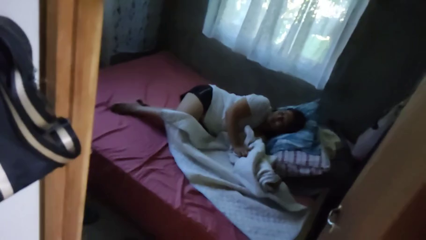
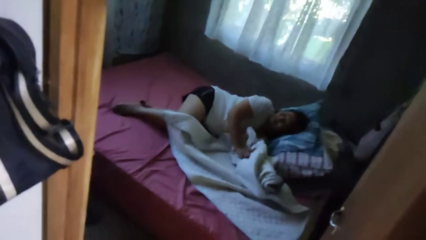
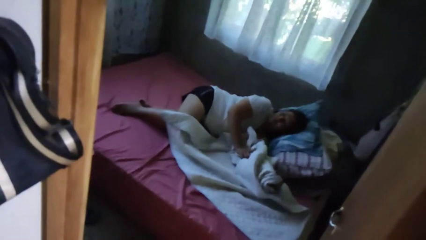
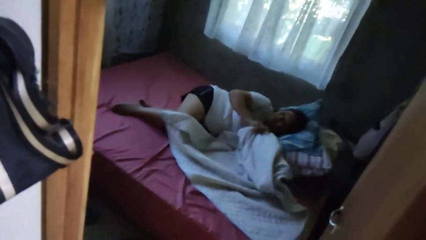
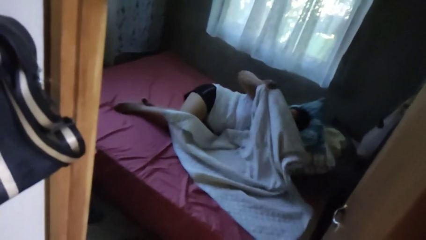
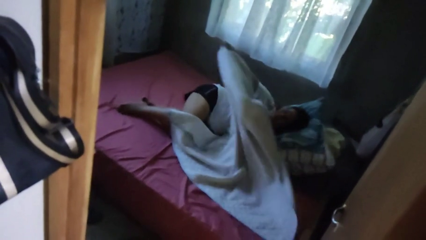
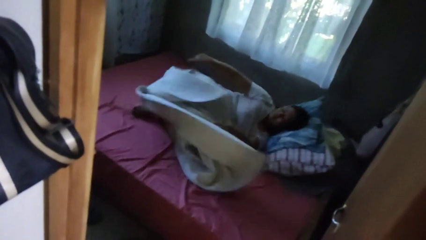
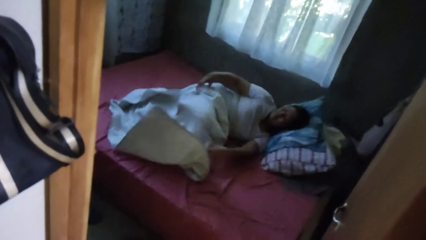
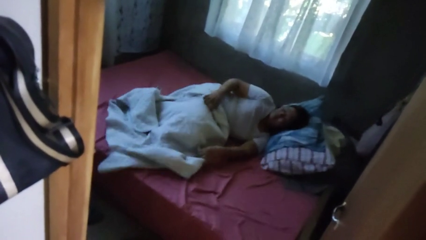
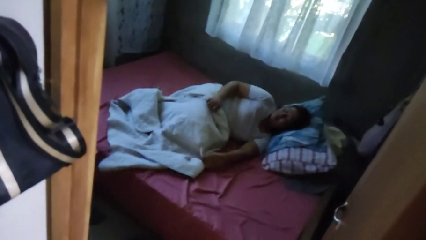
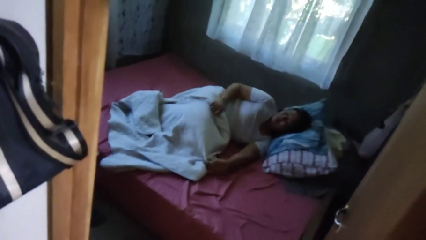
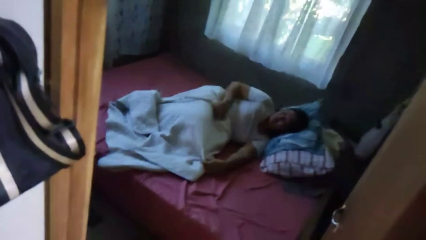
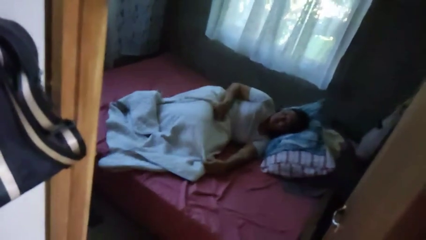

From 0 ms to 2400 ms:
person covers with bedsheets

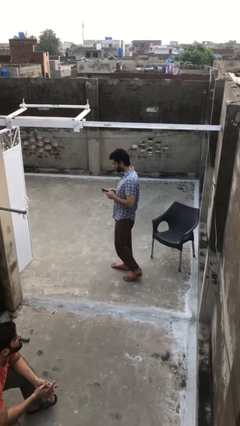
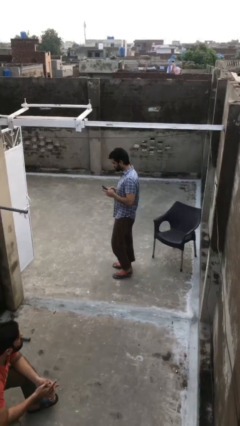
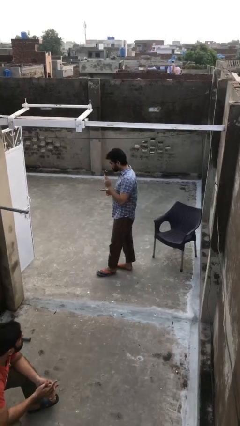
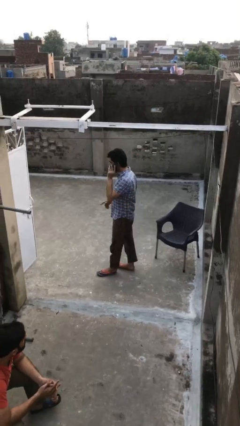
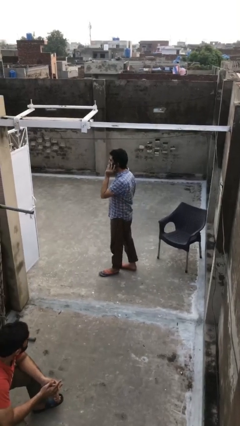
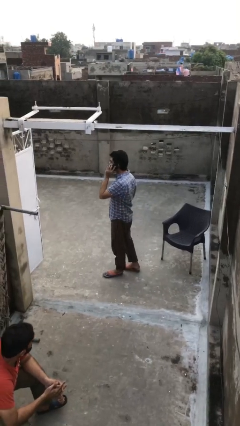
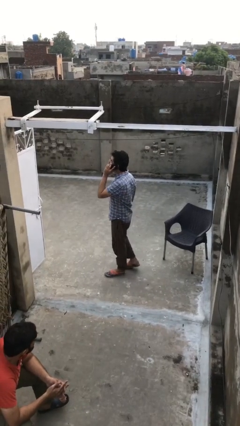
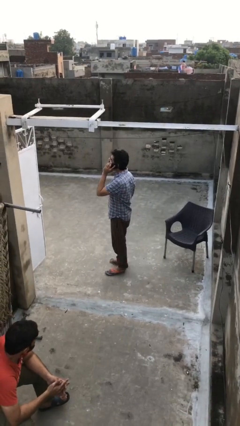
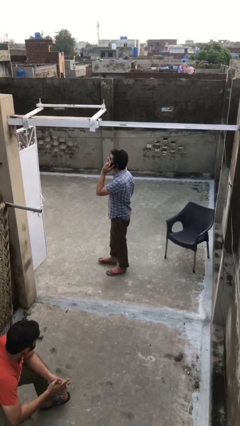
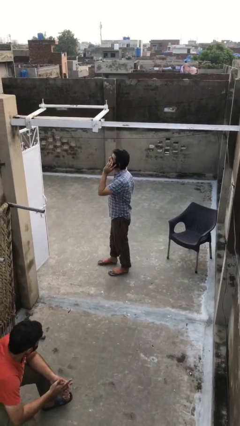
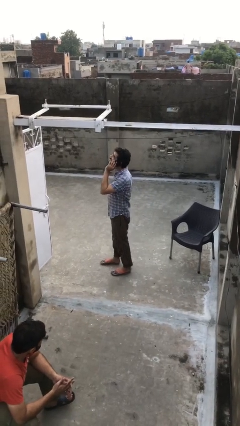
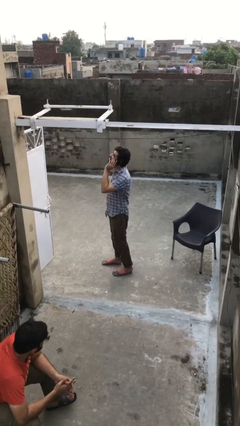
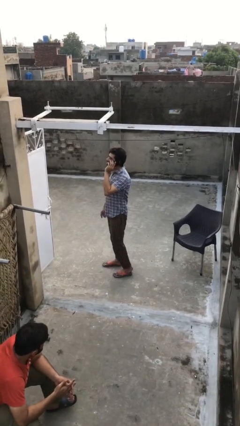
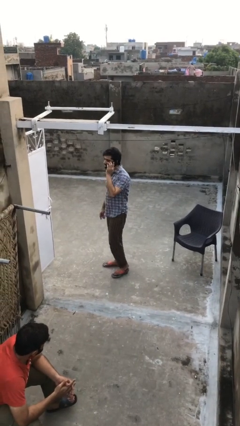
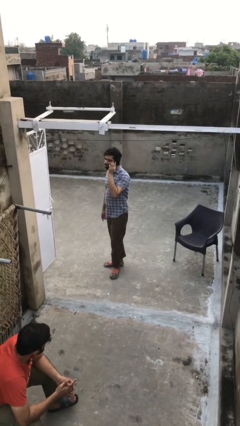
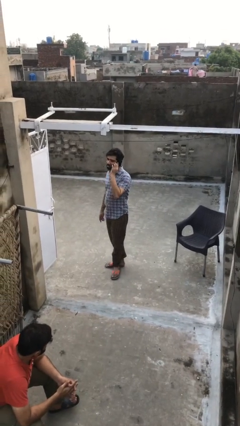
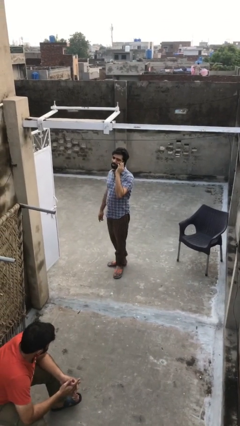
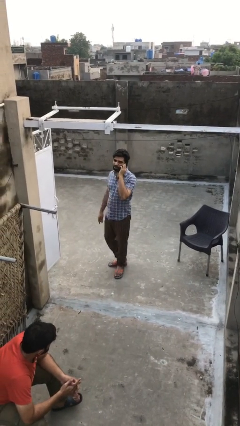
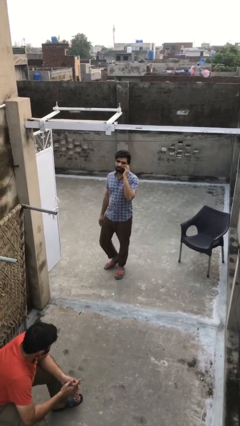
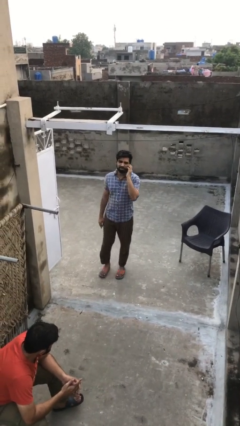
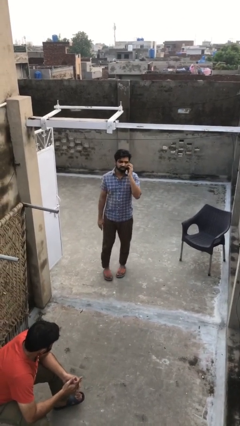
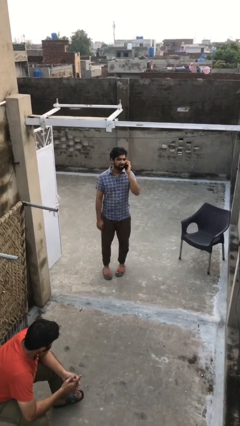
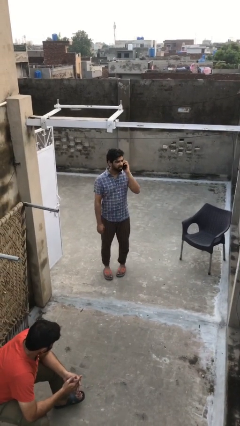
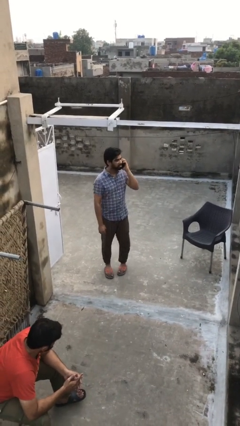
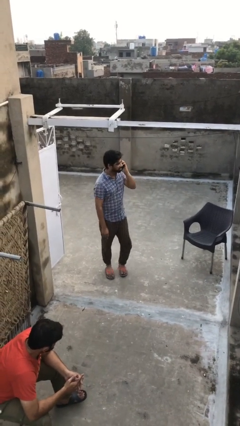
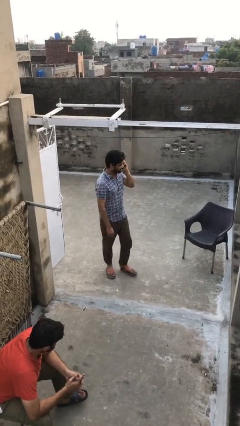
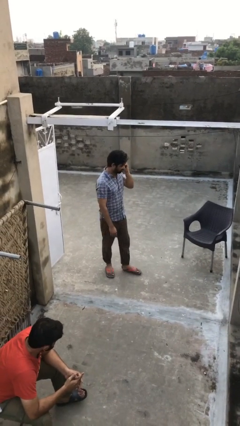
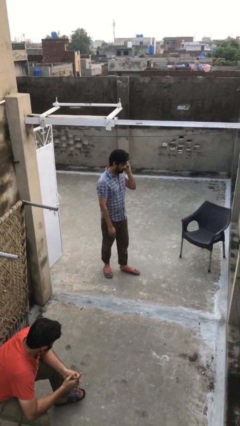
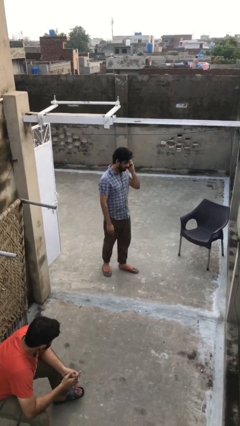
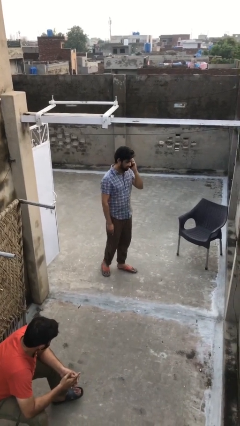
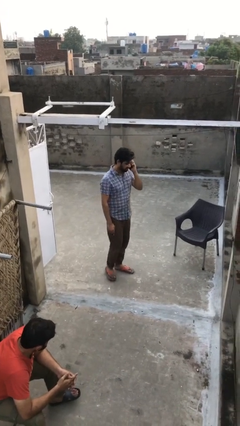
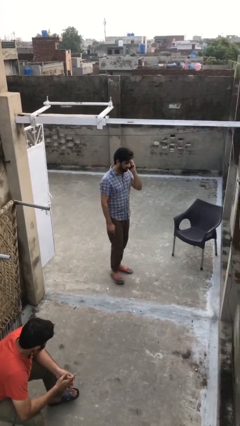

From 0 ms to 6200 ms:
person talks on phone

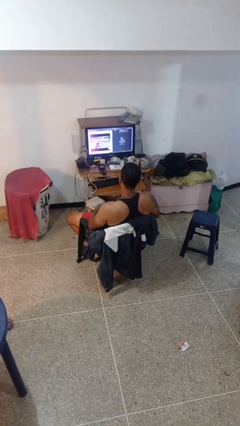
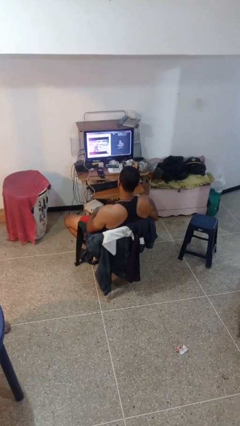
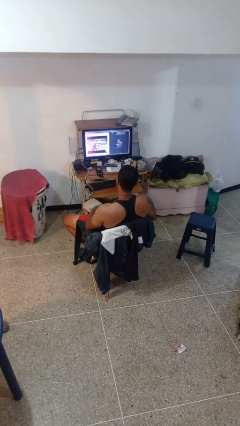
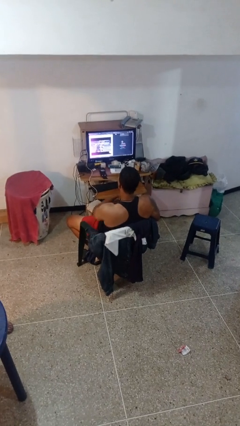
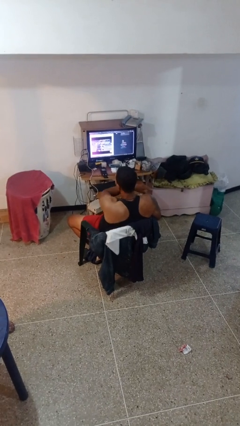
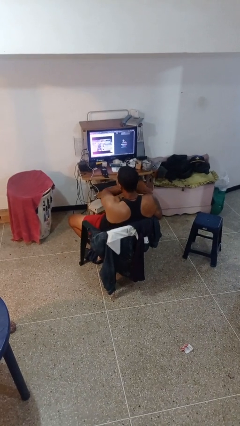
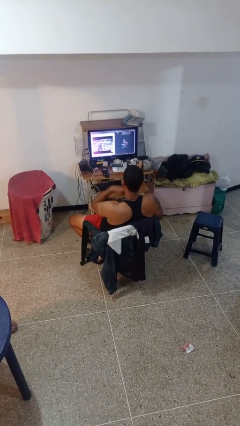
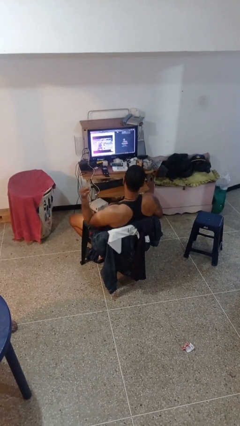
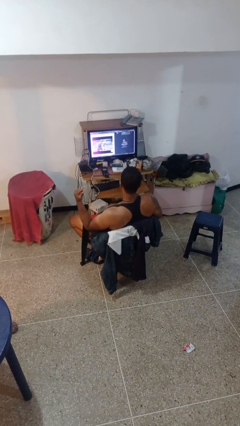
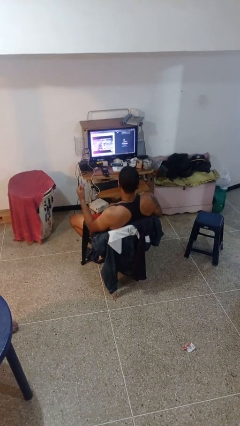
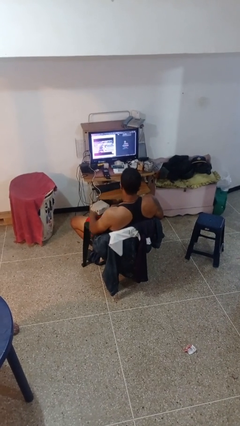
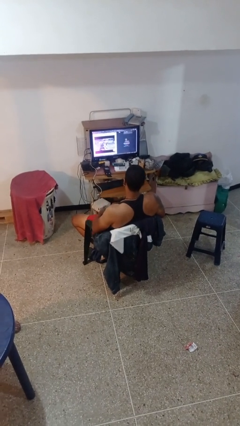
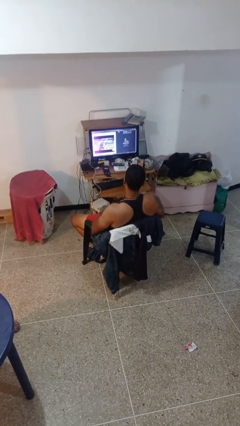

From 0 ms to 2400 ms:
person gestures cut

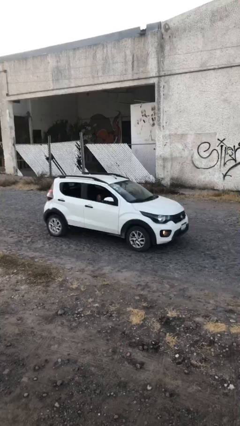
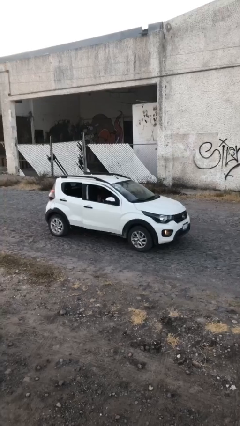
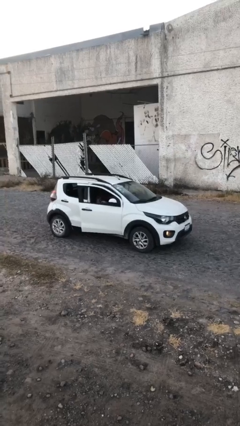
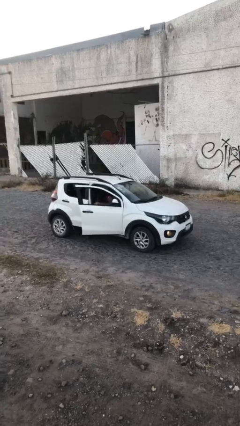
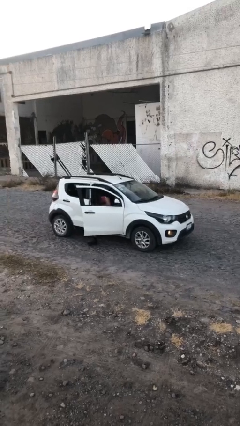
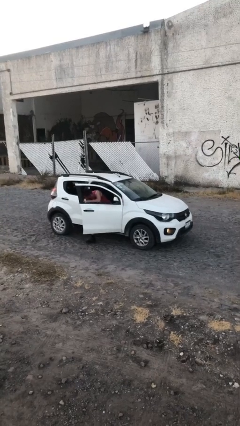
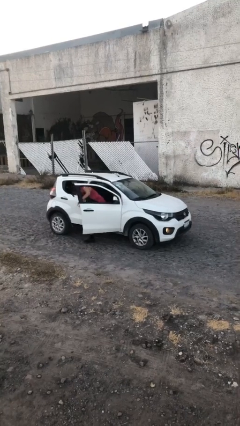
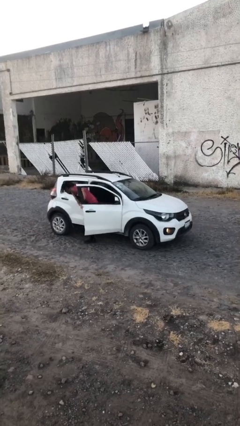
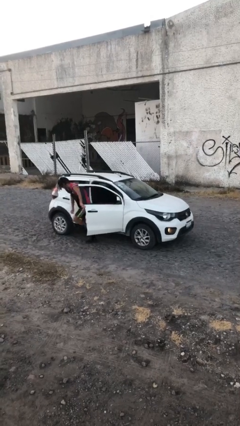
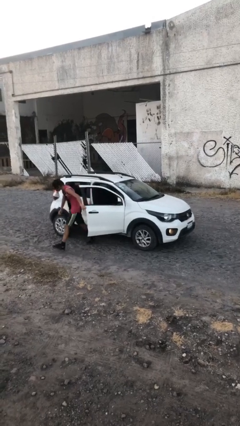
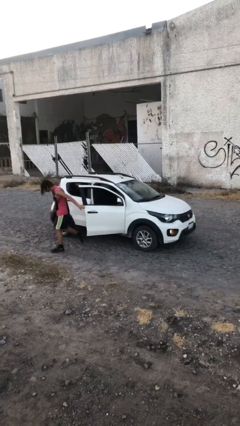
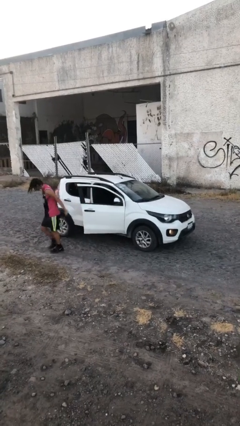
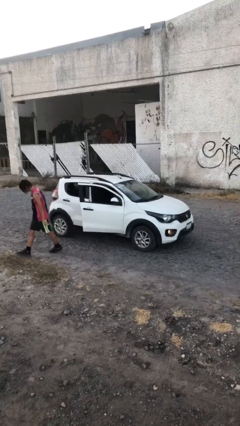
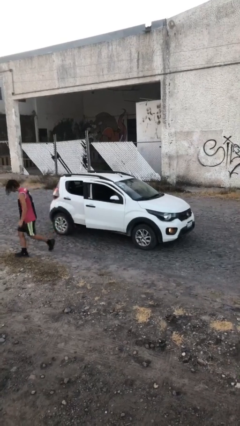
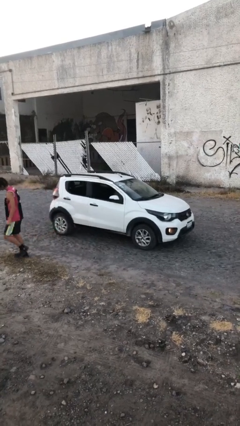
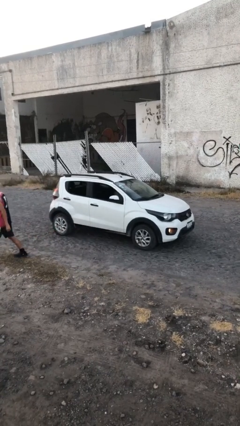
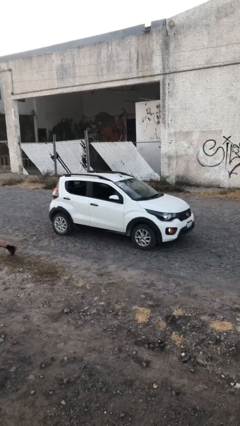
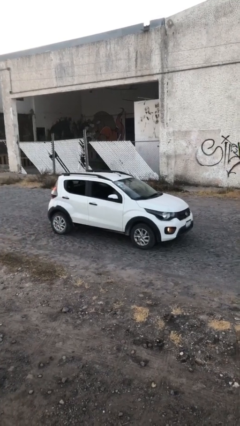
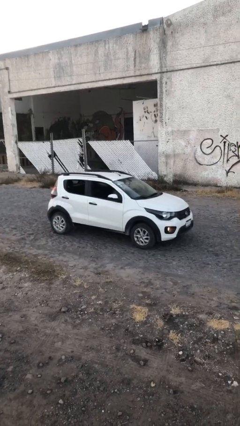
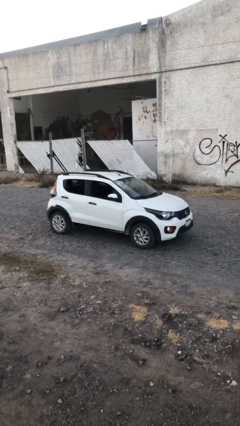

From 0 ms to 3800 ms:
car drops off person

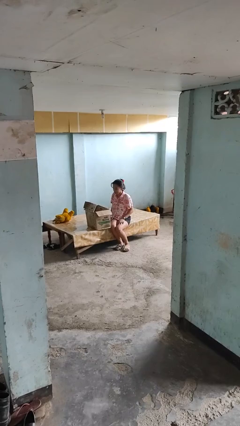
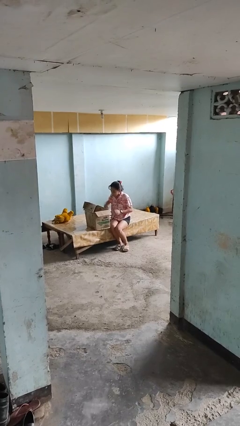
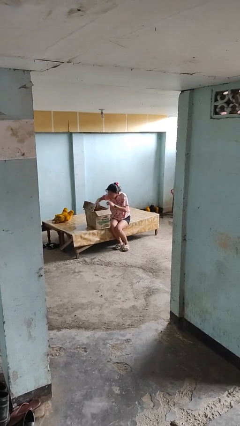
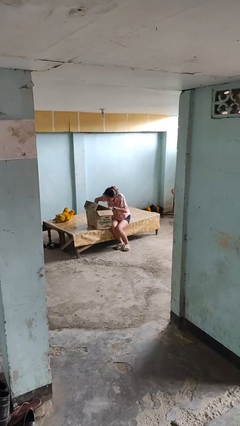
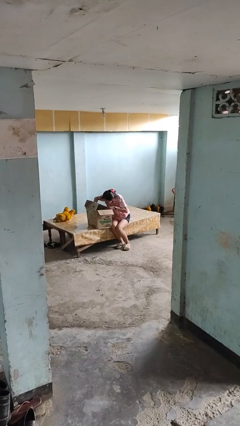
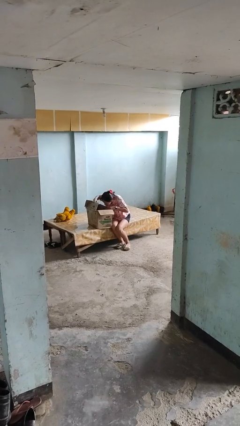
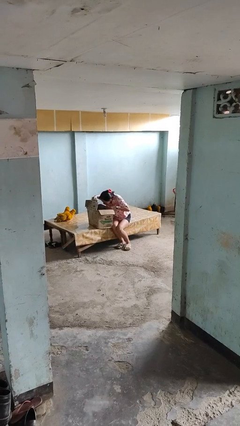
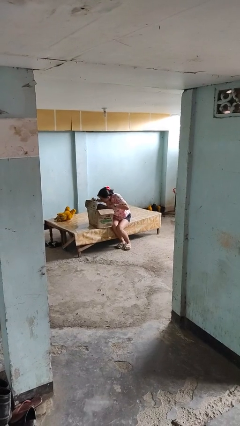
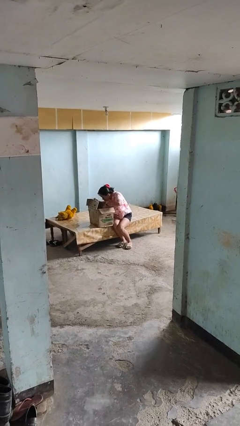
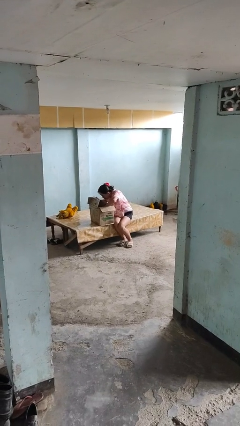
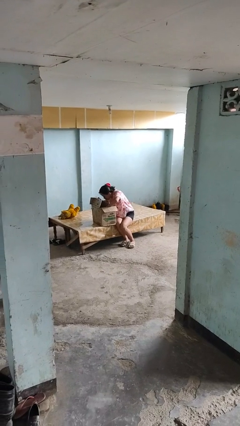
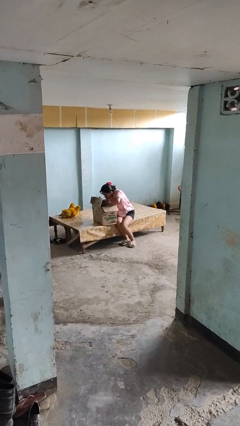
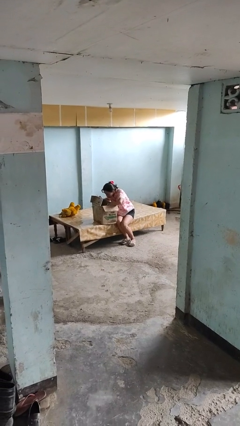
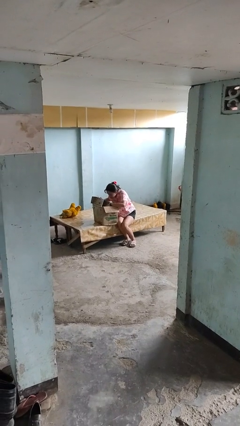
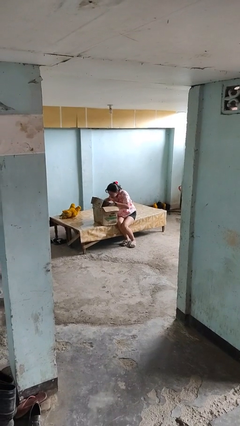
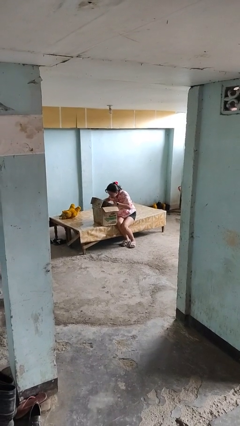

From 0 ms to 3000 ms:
person searches in box
